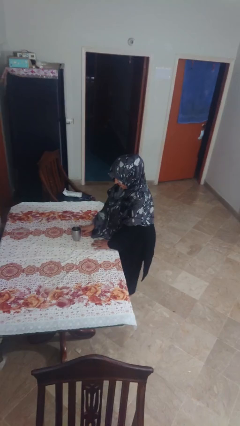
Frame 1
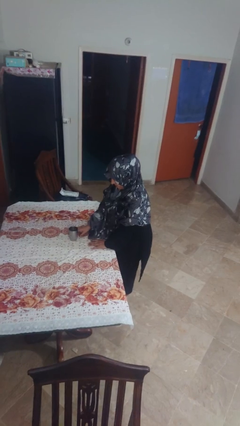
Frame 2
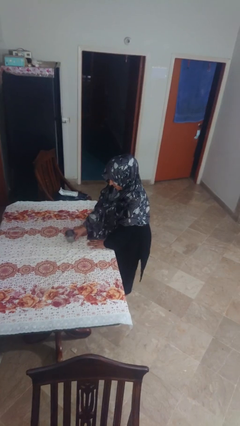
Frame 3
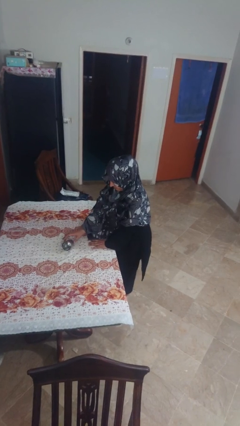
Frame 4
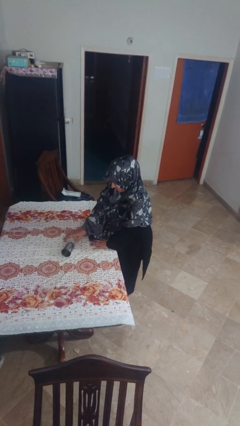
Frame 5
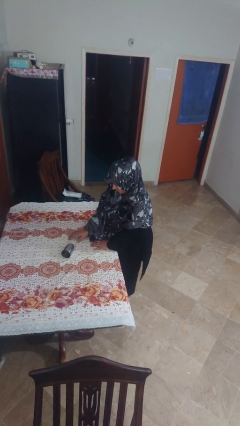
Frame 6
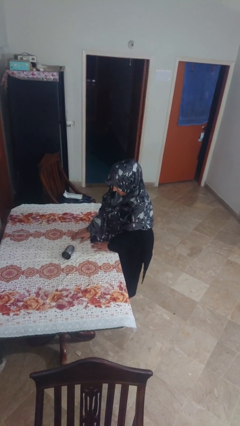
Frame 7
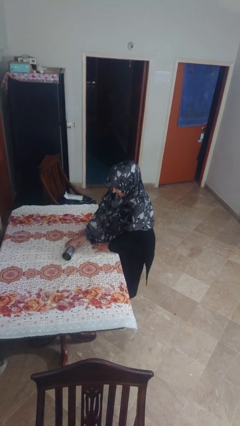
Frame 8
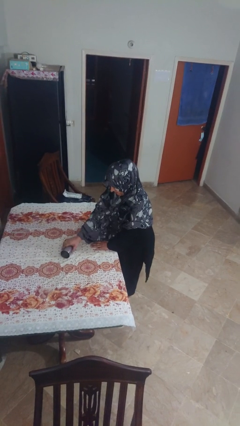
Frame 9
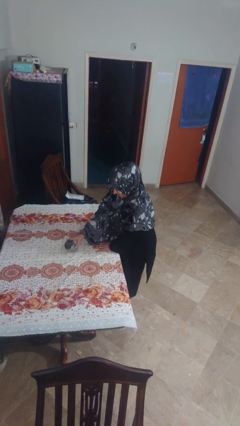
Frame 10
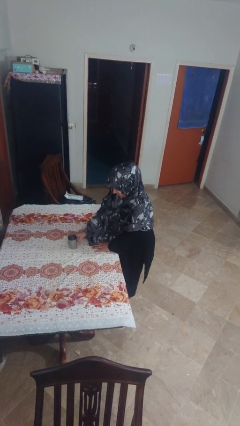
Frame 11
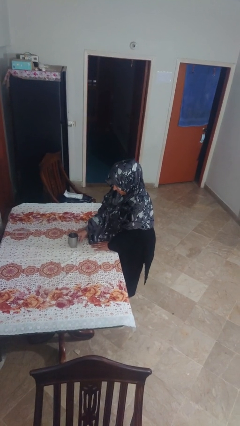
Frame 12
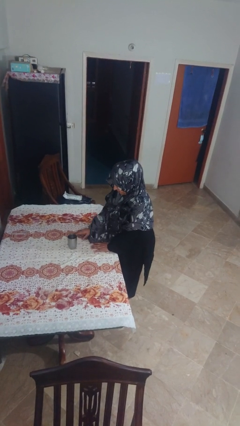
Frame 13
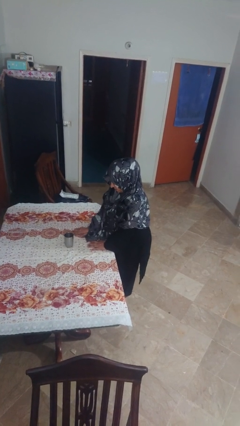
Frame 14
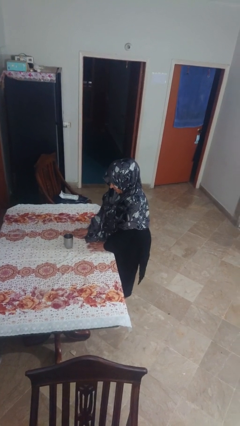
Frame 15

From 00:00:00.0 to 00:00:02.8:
person knocks over glass

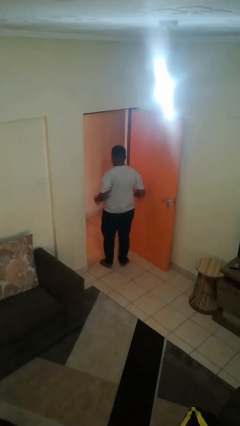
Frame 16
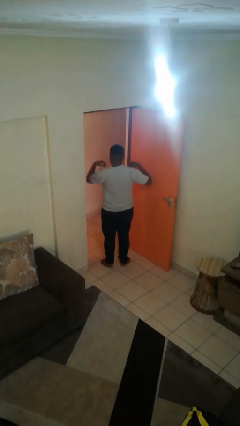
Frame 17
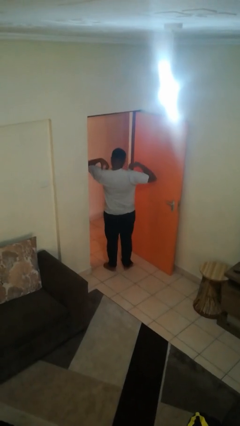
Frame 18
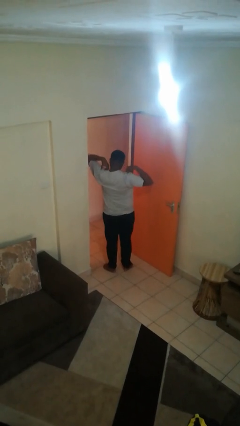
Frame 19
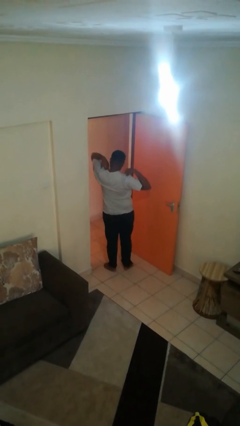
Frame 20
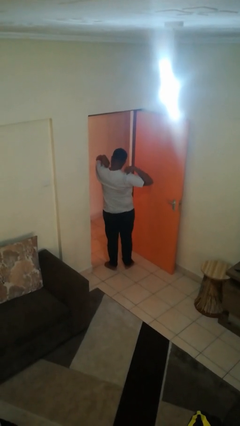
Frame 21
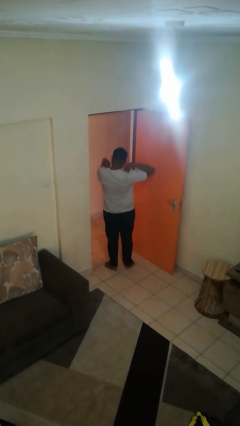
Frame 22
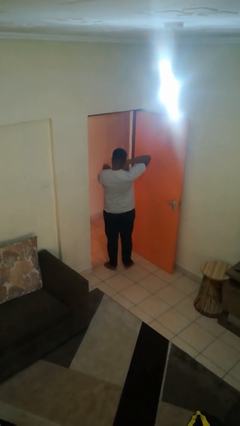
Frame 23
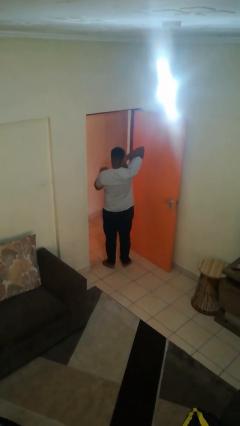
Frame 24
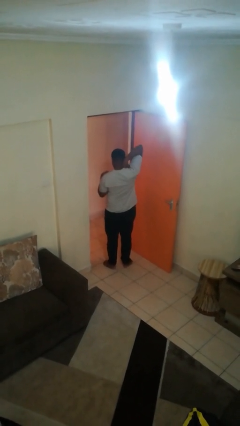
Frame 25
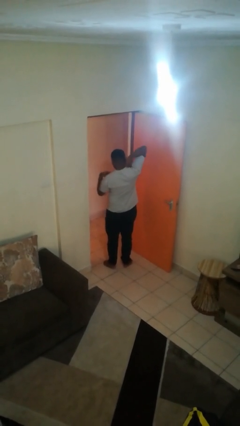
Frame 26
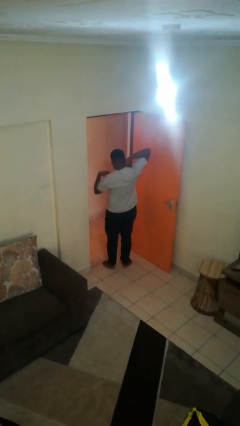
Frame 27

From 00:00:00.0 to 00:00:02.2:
person stretches arms to side

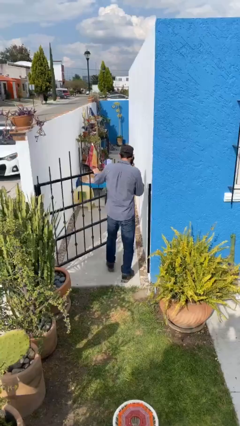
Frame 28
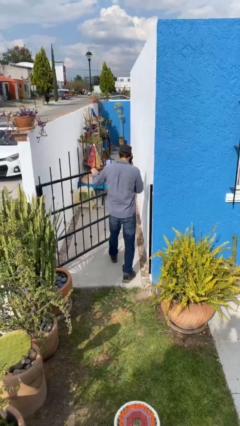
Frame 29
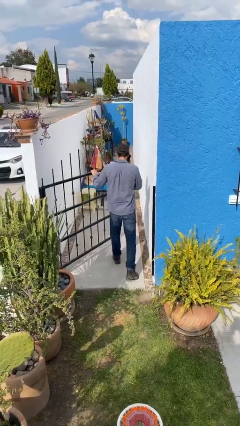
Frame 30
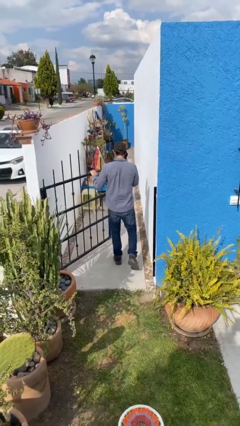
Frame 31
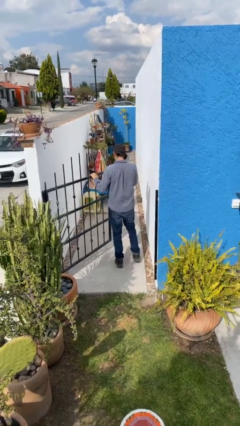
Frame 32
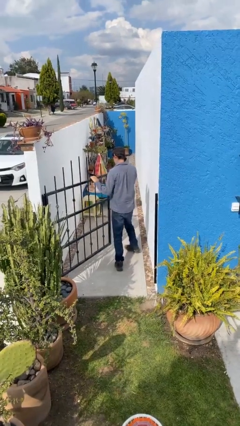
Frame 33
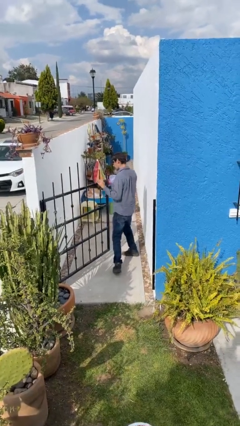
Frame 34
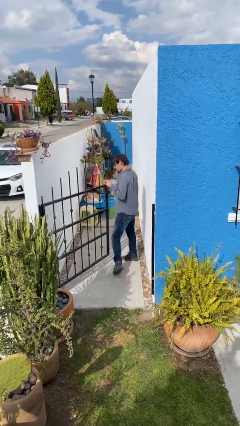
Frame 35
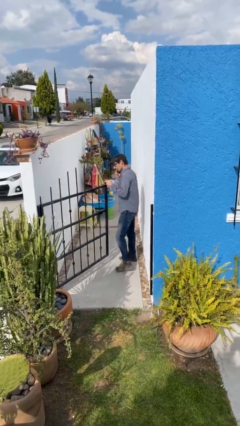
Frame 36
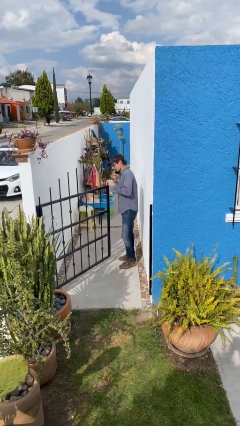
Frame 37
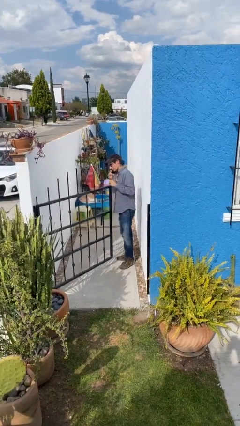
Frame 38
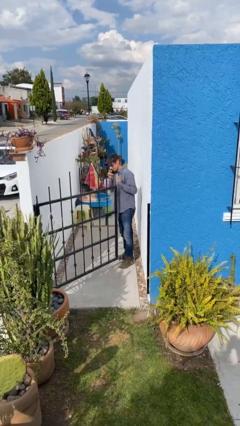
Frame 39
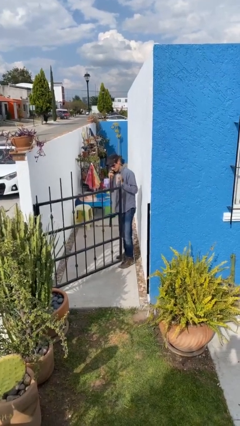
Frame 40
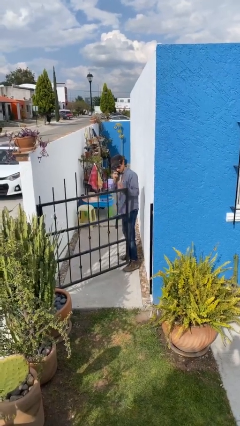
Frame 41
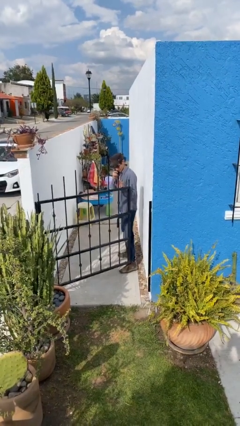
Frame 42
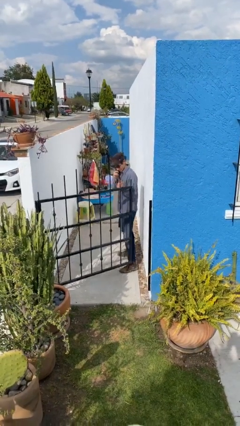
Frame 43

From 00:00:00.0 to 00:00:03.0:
person exits scene through structure

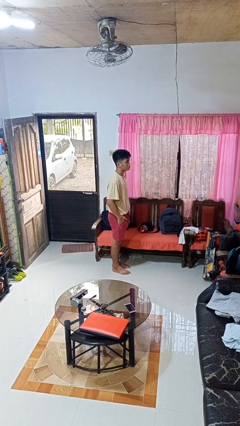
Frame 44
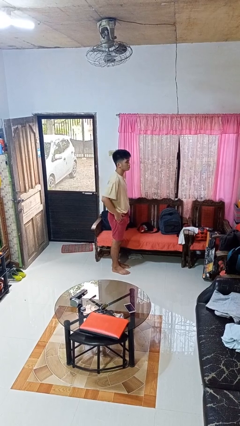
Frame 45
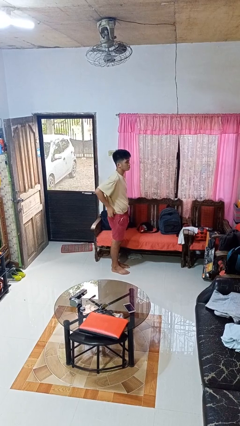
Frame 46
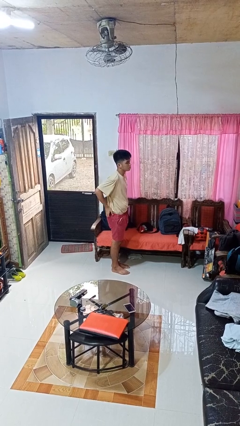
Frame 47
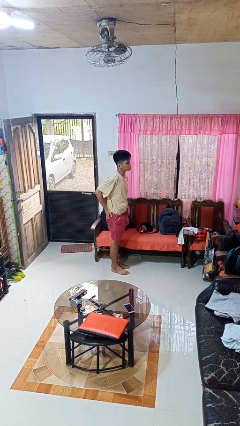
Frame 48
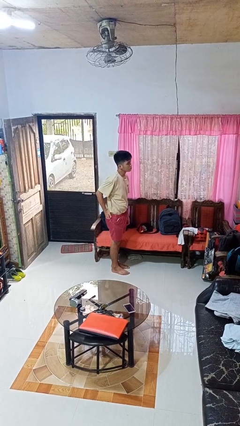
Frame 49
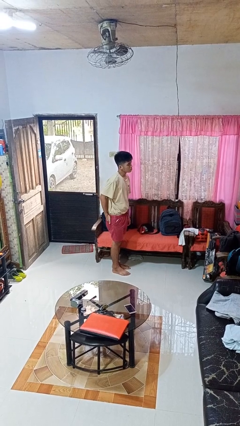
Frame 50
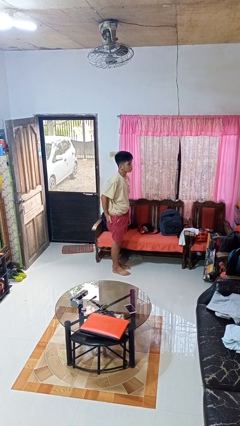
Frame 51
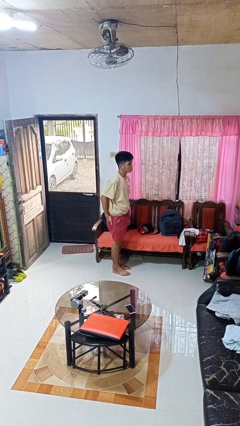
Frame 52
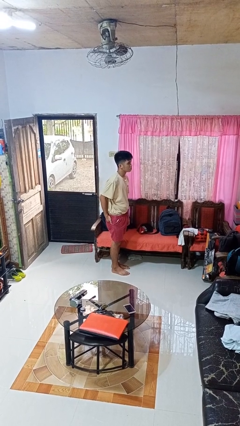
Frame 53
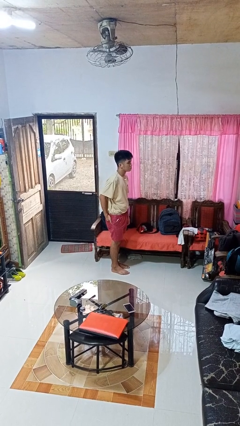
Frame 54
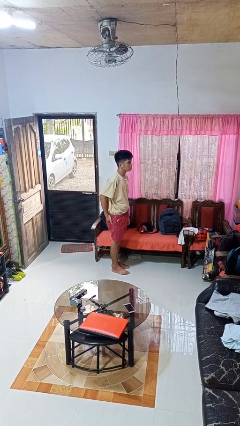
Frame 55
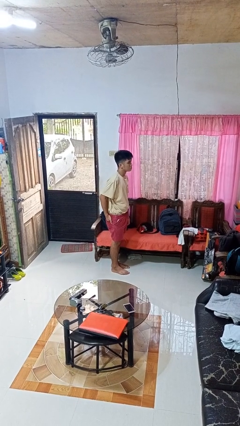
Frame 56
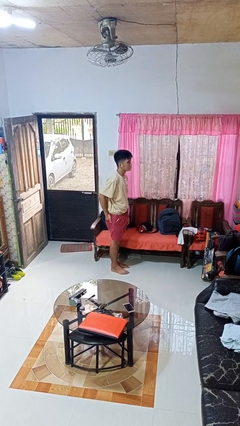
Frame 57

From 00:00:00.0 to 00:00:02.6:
person puts hands in back pockets

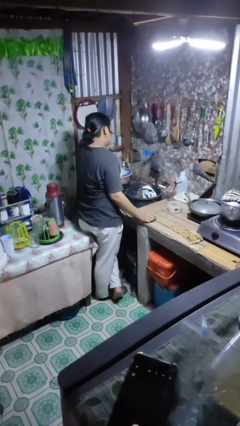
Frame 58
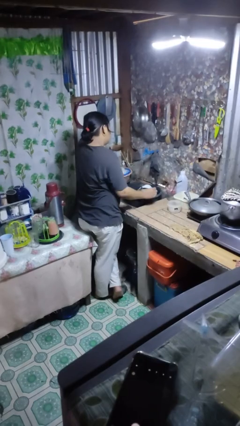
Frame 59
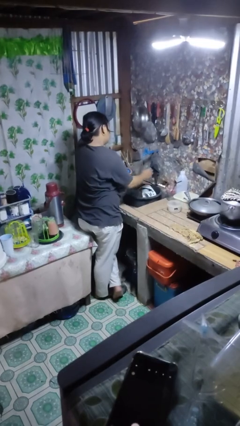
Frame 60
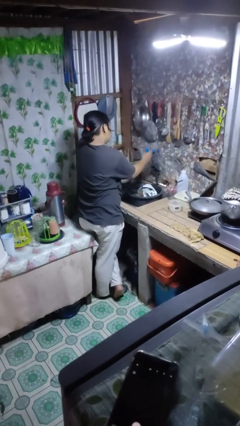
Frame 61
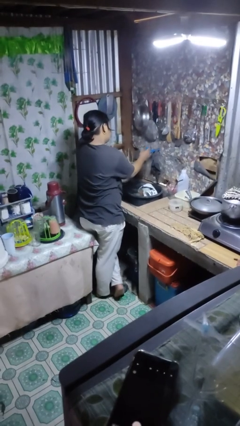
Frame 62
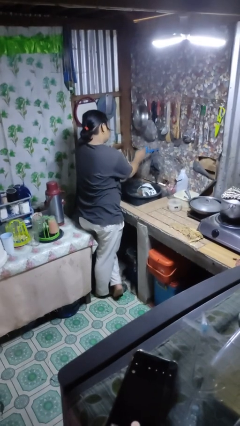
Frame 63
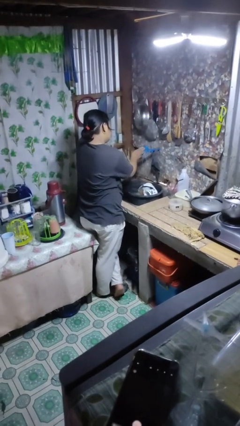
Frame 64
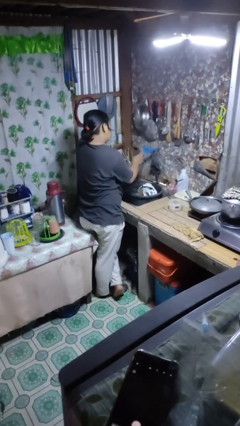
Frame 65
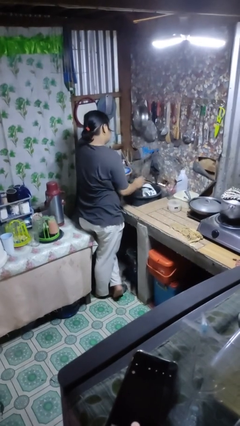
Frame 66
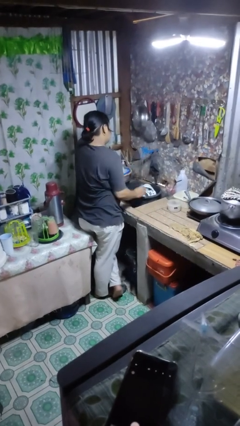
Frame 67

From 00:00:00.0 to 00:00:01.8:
person turns off faucet

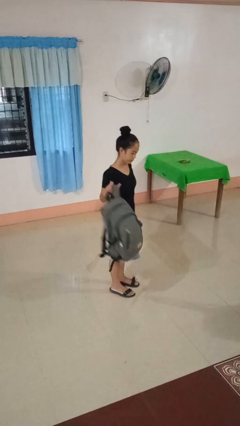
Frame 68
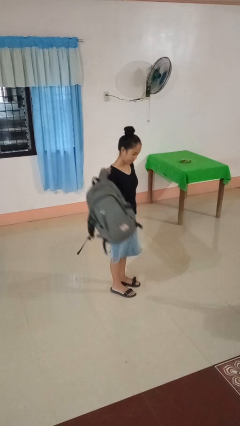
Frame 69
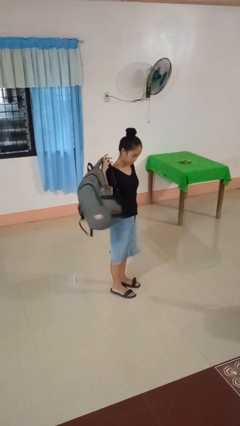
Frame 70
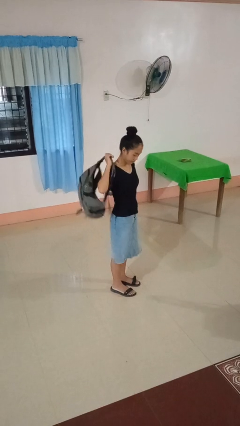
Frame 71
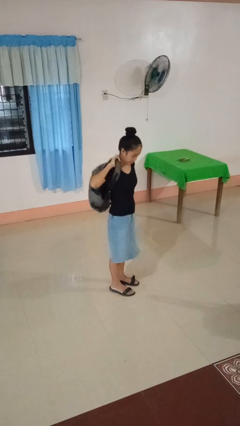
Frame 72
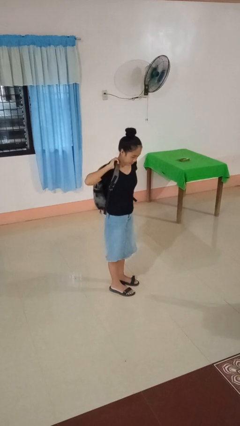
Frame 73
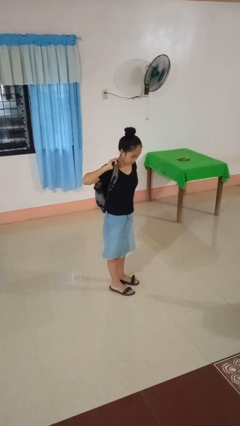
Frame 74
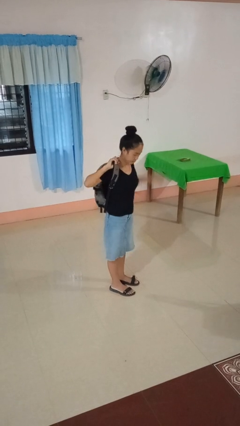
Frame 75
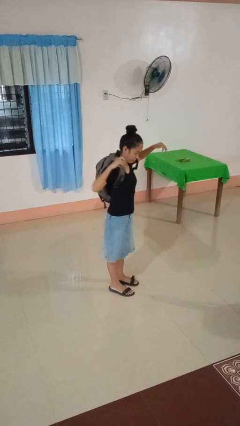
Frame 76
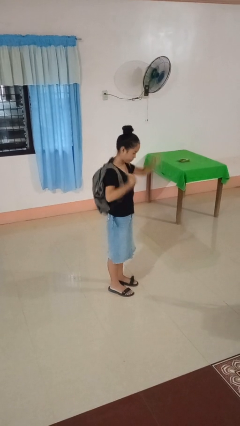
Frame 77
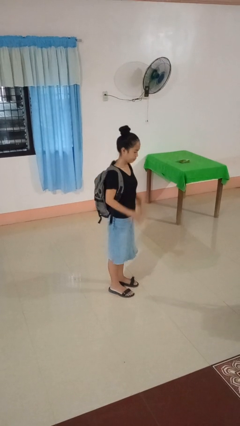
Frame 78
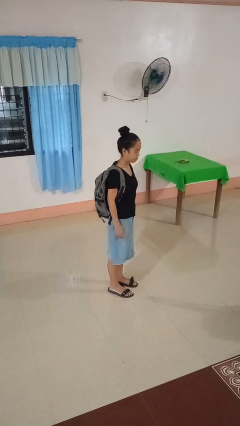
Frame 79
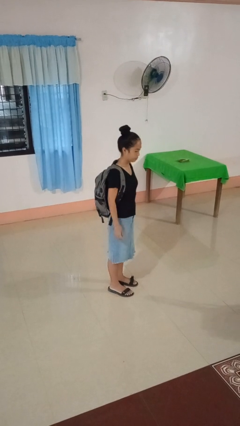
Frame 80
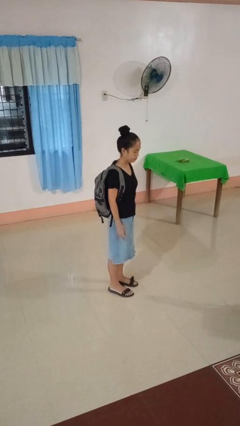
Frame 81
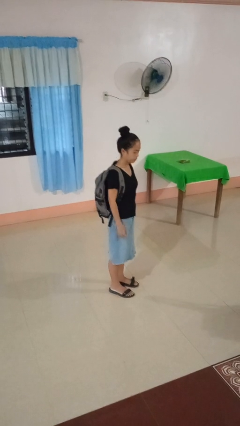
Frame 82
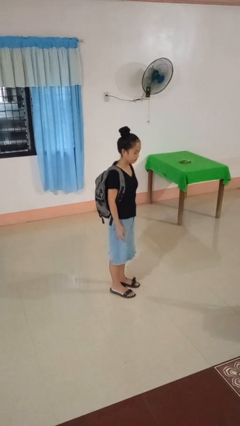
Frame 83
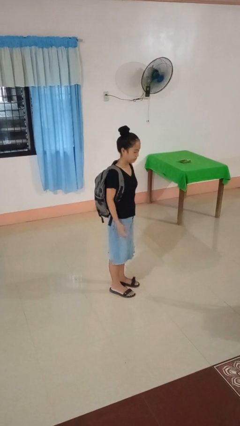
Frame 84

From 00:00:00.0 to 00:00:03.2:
person puts on backpack

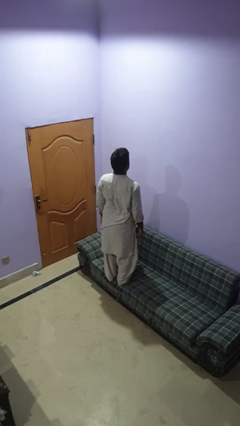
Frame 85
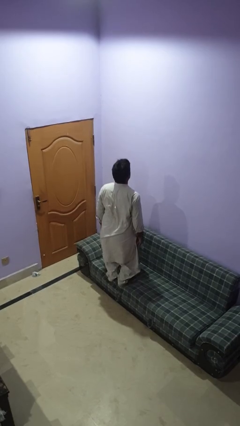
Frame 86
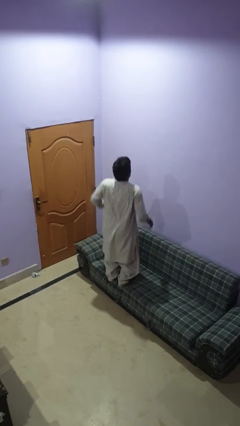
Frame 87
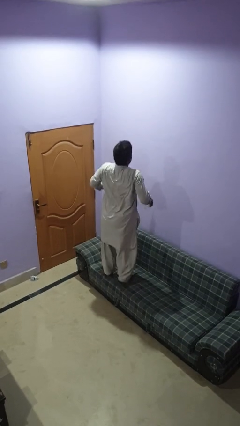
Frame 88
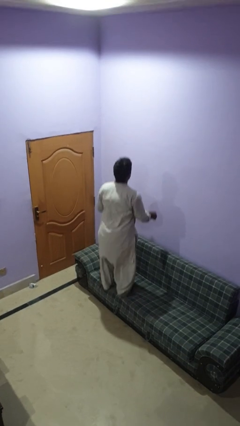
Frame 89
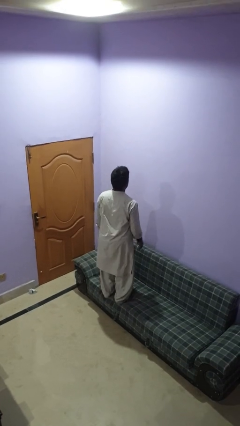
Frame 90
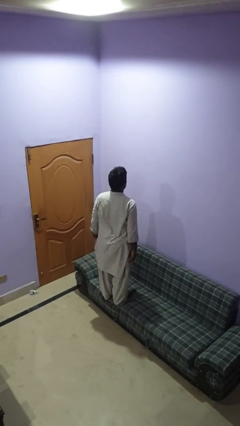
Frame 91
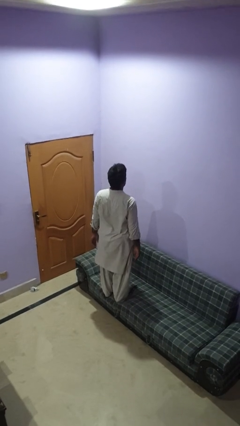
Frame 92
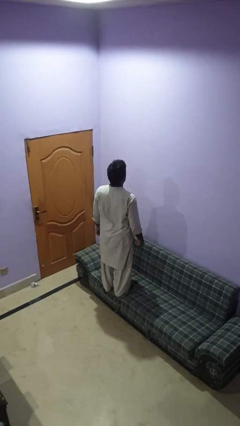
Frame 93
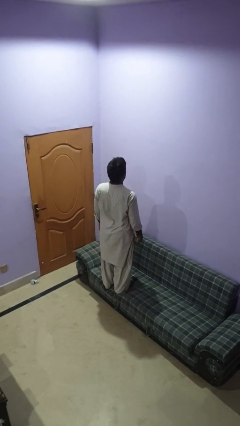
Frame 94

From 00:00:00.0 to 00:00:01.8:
person jumps on couch
